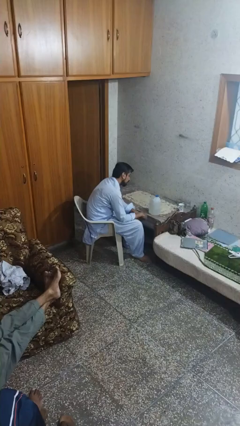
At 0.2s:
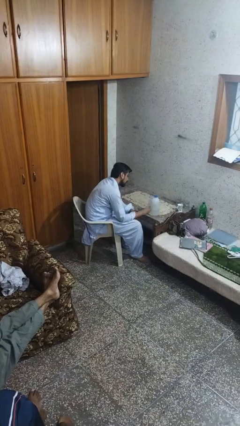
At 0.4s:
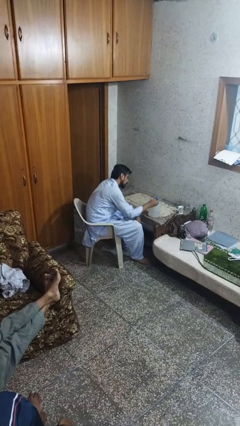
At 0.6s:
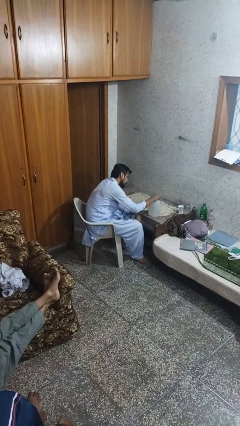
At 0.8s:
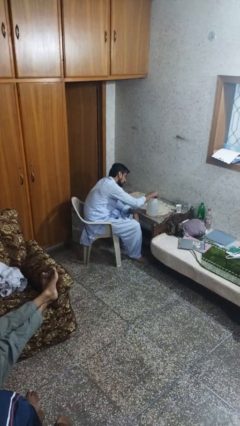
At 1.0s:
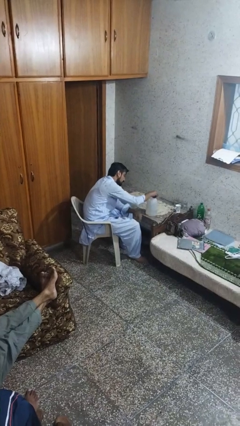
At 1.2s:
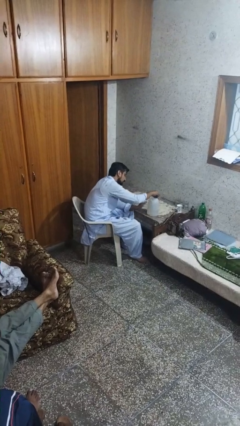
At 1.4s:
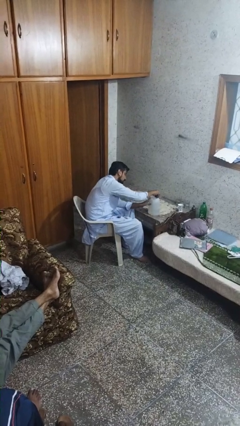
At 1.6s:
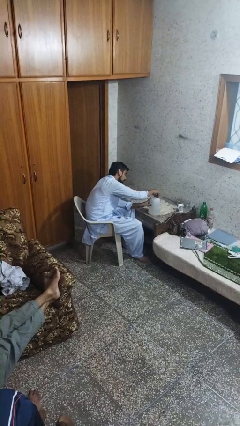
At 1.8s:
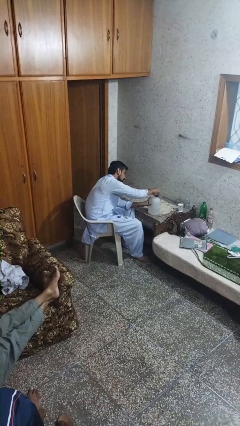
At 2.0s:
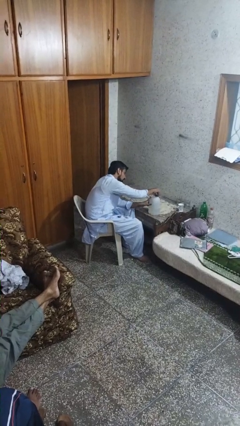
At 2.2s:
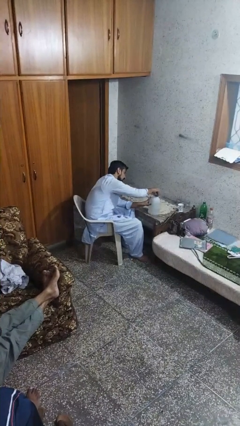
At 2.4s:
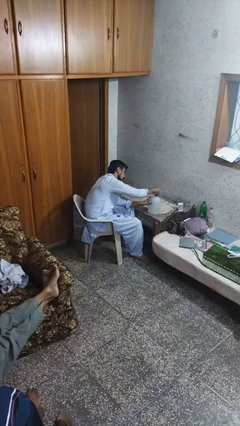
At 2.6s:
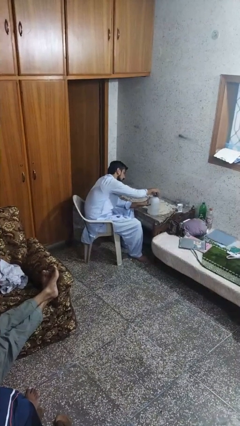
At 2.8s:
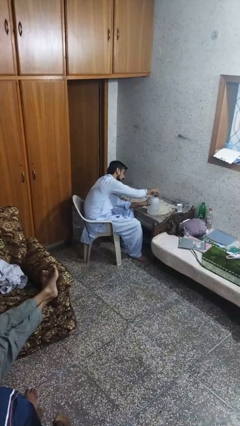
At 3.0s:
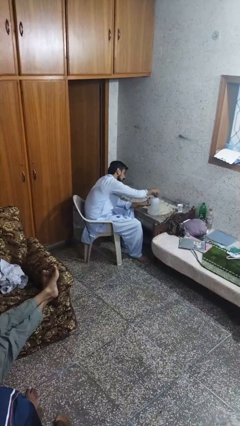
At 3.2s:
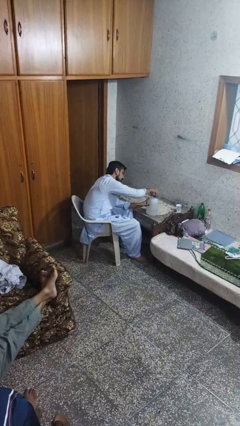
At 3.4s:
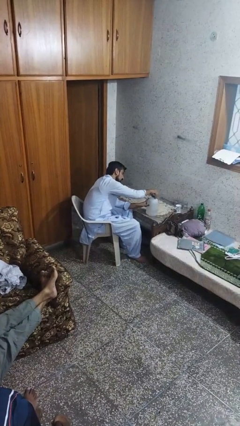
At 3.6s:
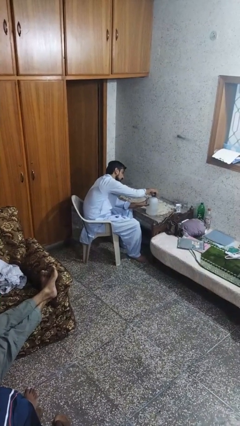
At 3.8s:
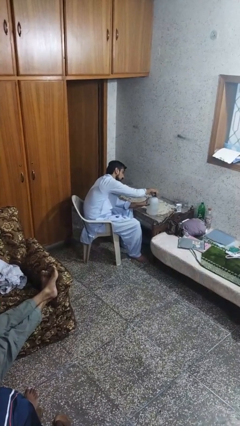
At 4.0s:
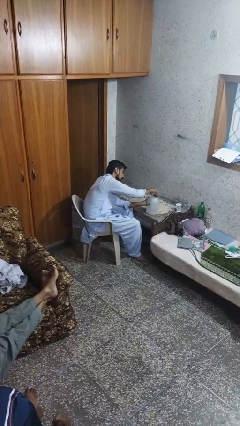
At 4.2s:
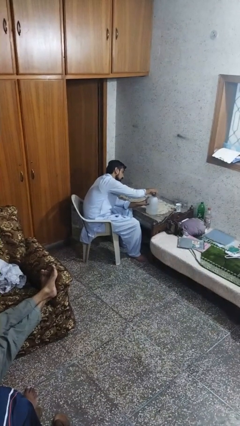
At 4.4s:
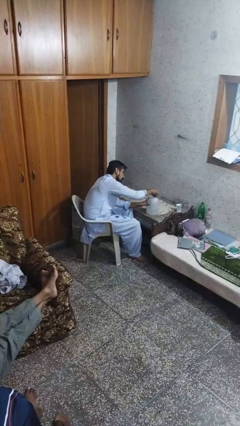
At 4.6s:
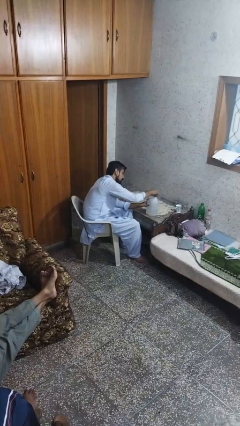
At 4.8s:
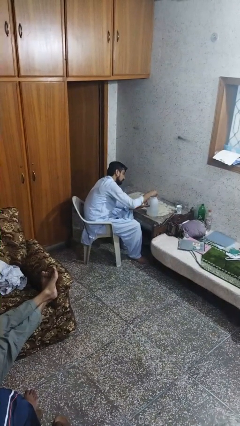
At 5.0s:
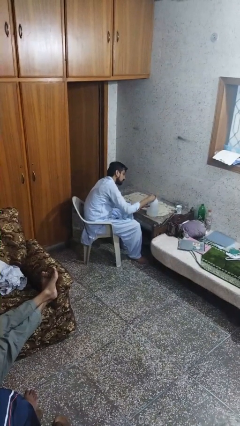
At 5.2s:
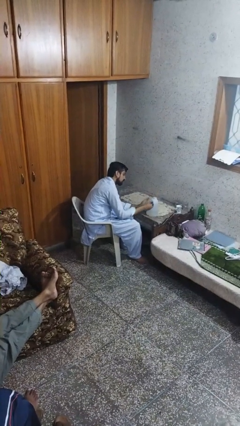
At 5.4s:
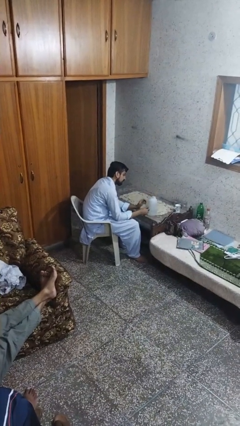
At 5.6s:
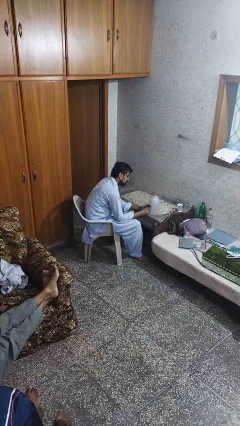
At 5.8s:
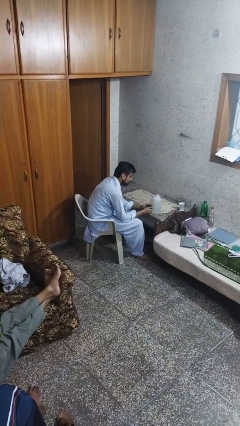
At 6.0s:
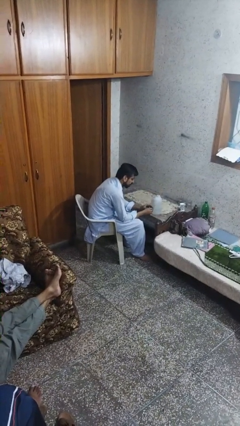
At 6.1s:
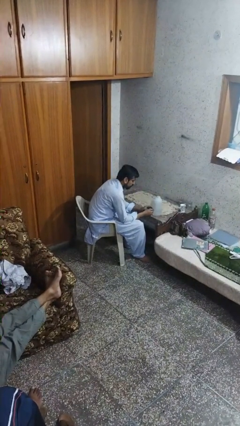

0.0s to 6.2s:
person unscrews lid from bottle

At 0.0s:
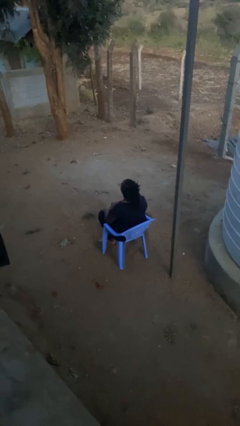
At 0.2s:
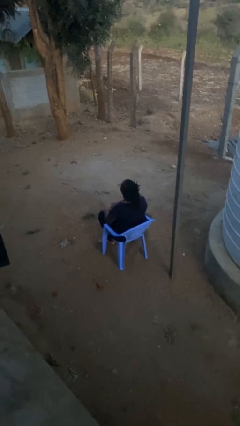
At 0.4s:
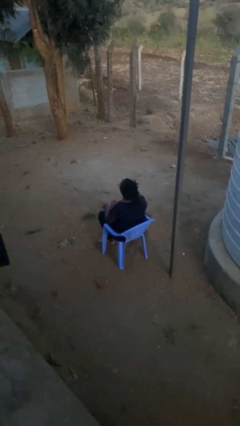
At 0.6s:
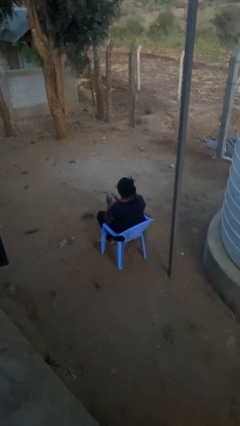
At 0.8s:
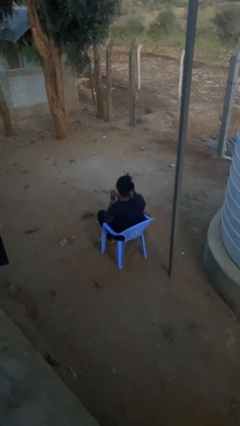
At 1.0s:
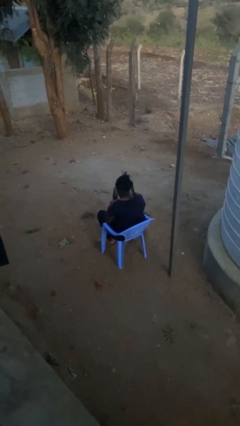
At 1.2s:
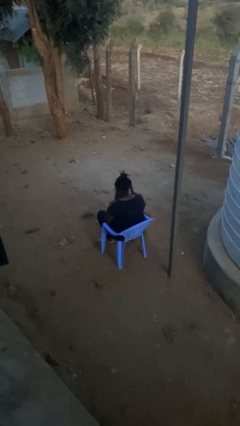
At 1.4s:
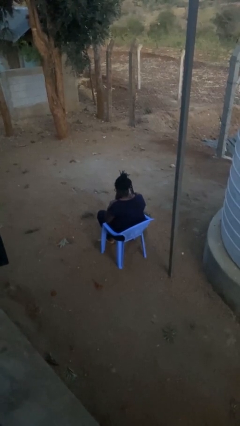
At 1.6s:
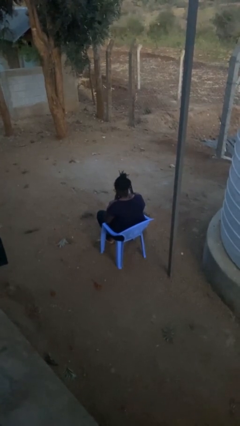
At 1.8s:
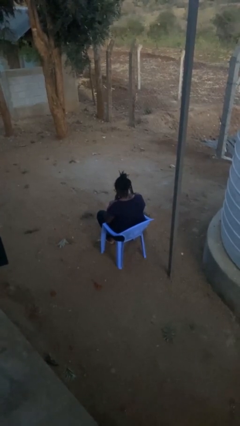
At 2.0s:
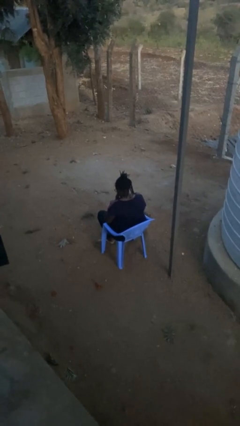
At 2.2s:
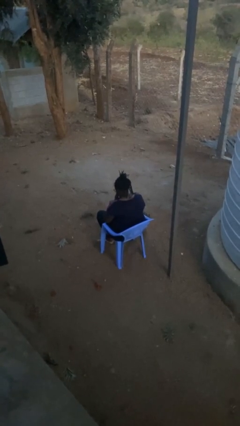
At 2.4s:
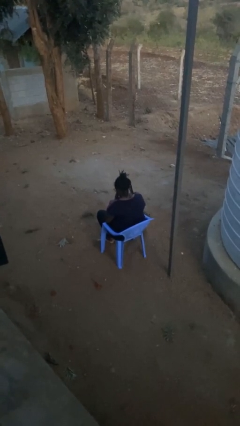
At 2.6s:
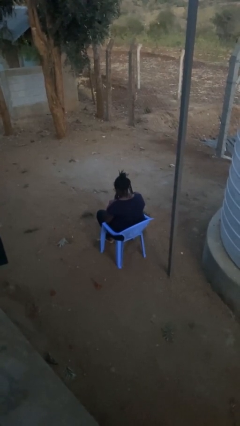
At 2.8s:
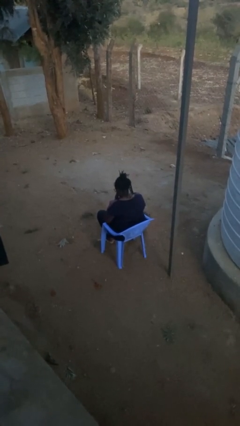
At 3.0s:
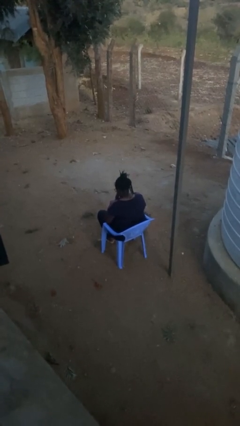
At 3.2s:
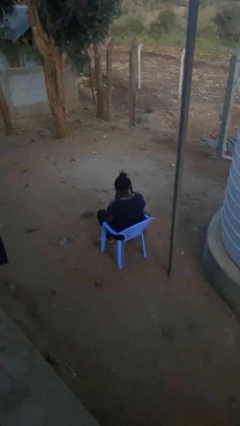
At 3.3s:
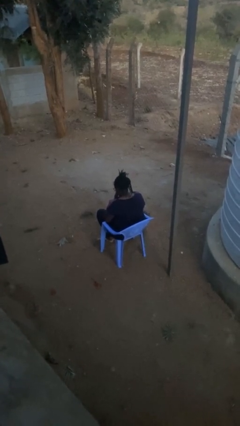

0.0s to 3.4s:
person prays

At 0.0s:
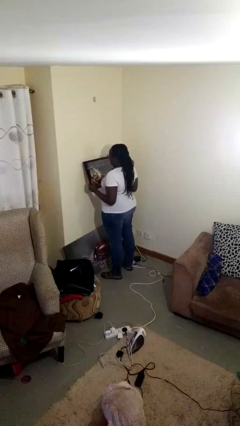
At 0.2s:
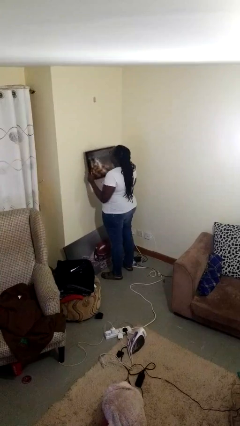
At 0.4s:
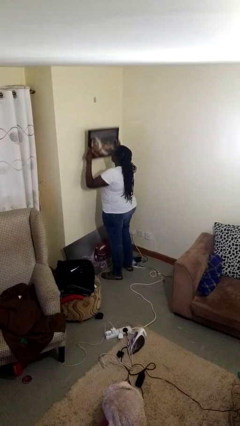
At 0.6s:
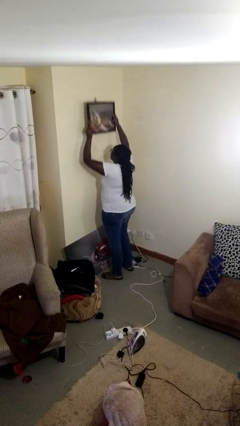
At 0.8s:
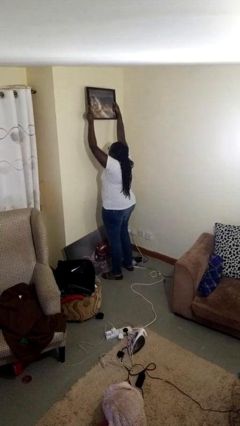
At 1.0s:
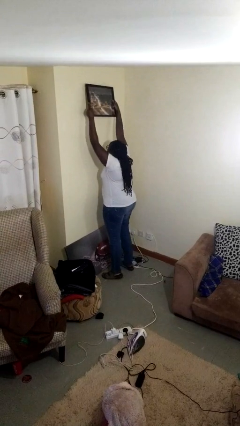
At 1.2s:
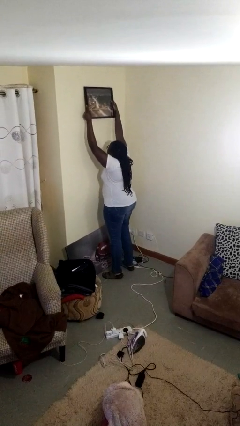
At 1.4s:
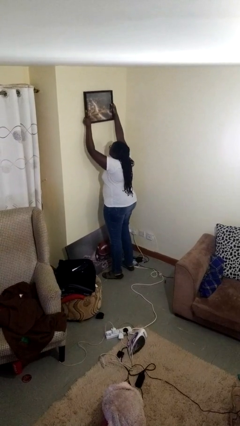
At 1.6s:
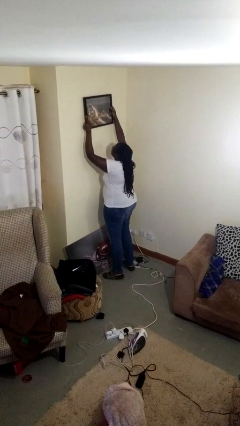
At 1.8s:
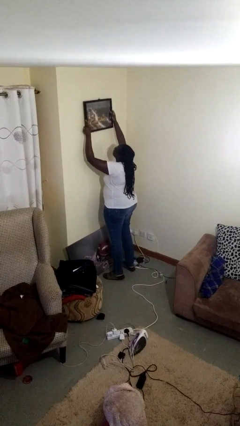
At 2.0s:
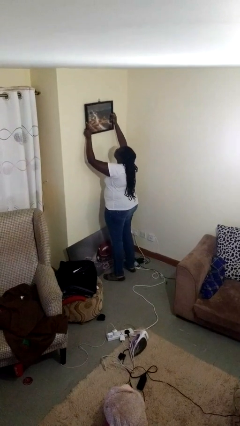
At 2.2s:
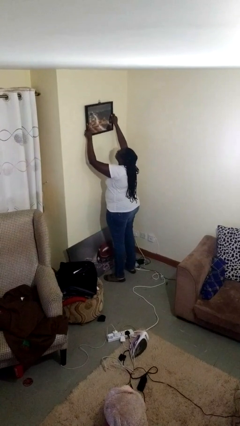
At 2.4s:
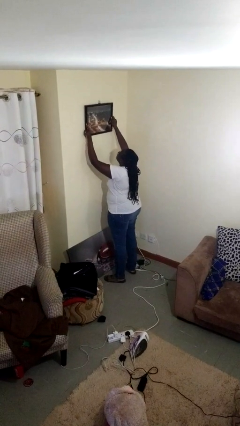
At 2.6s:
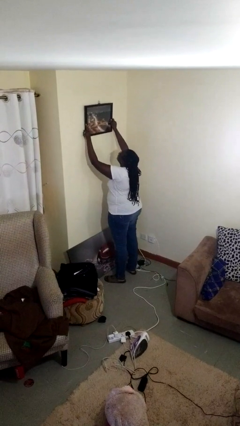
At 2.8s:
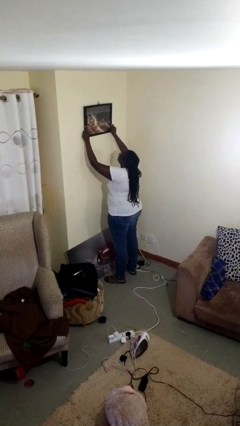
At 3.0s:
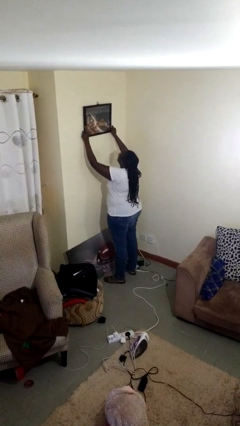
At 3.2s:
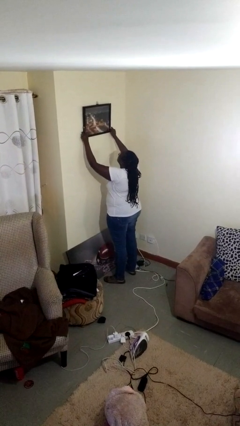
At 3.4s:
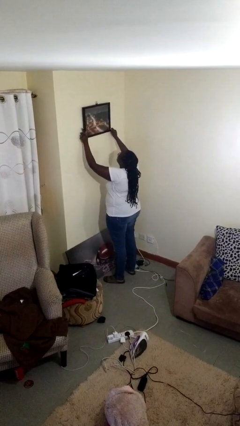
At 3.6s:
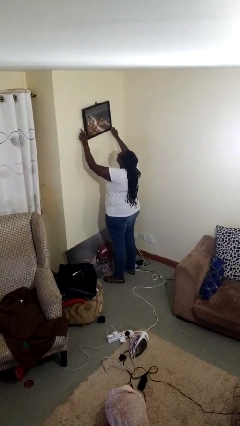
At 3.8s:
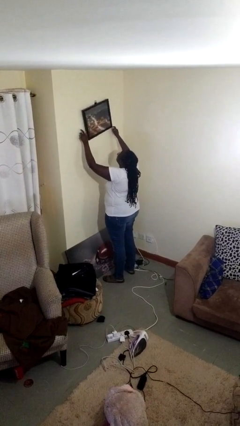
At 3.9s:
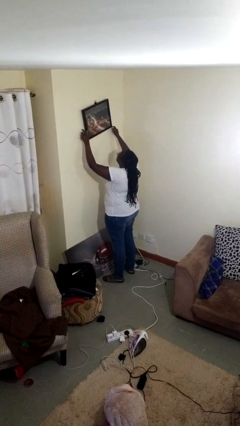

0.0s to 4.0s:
person puts up picture frame

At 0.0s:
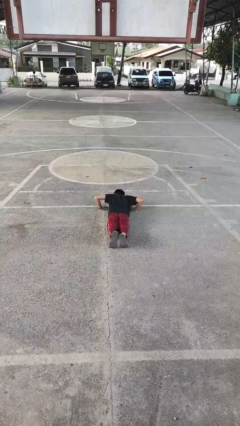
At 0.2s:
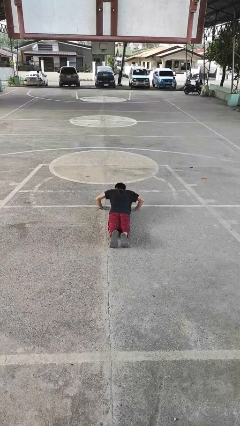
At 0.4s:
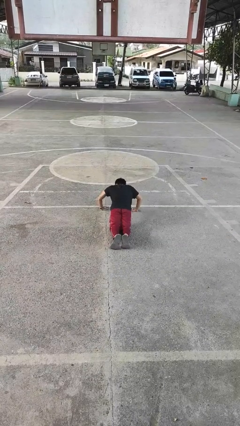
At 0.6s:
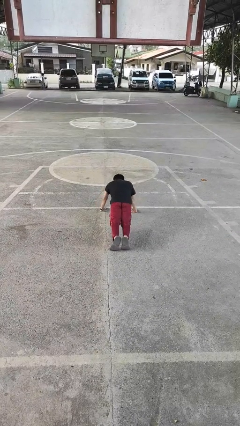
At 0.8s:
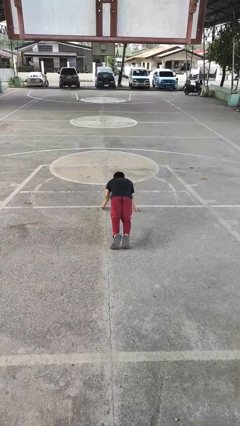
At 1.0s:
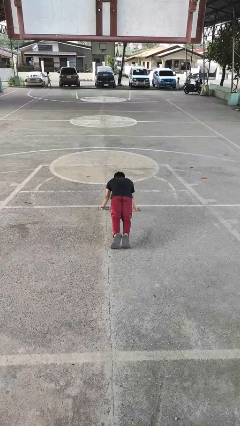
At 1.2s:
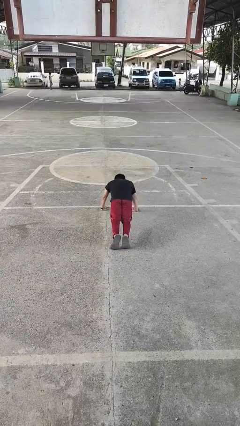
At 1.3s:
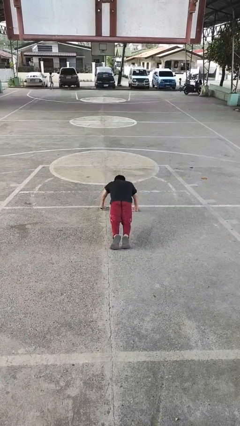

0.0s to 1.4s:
person exercises with pushup

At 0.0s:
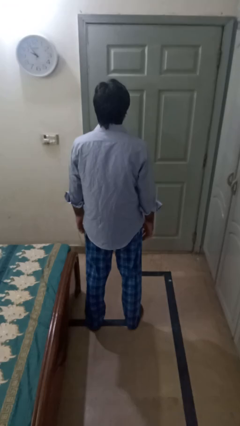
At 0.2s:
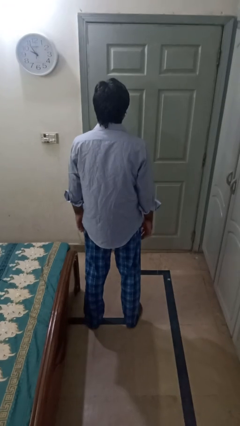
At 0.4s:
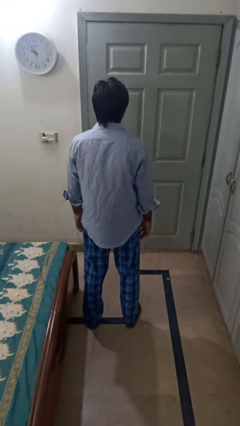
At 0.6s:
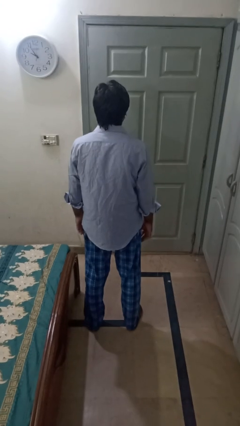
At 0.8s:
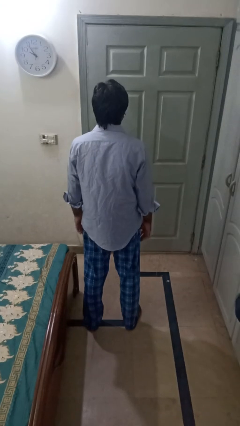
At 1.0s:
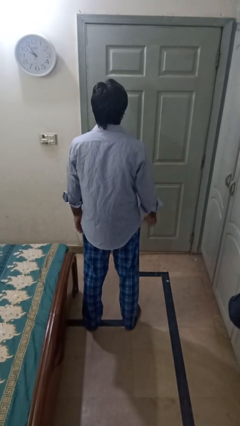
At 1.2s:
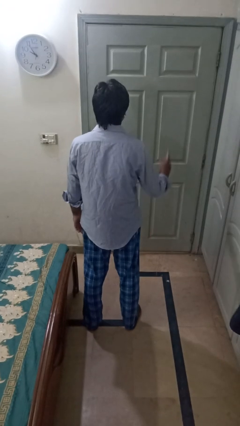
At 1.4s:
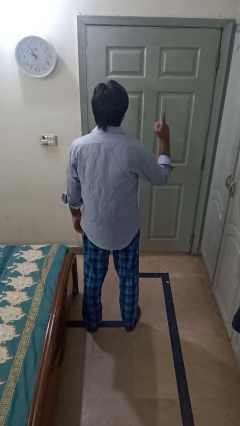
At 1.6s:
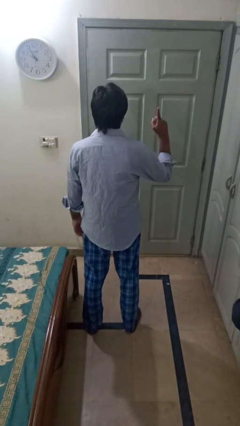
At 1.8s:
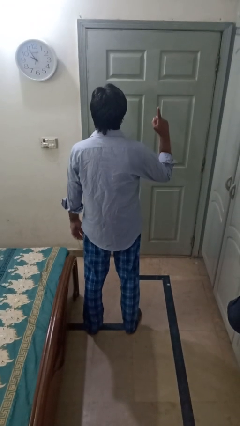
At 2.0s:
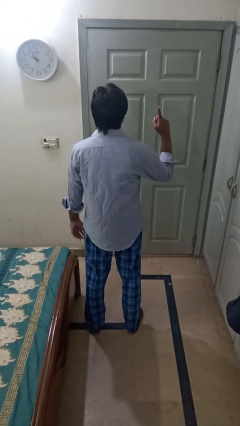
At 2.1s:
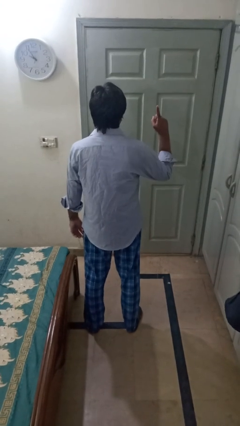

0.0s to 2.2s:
person gestures number one

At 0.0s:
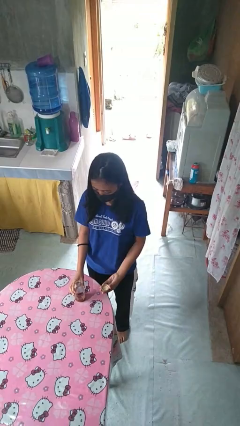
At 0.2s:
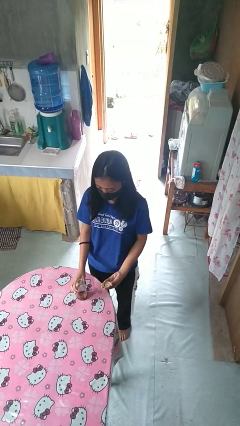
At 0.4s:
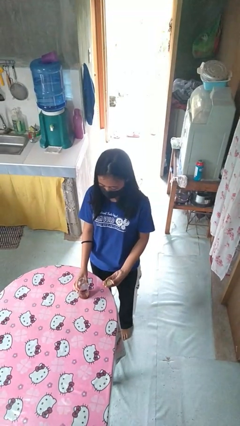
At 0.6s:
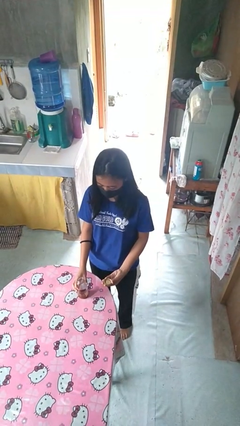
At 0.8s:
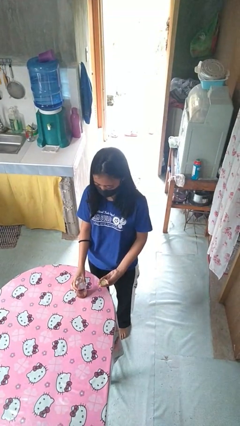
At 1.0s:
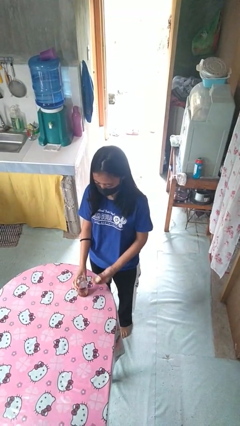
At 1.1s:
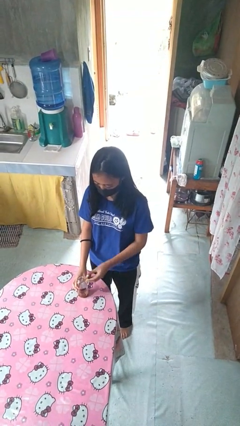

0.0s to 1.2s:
person closes jar
